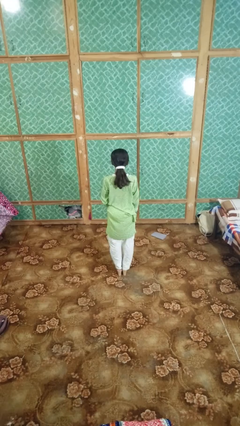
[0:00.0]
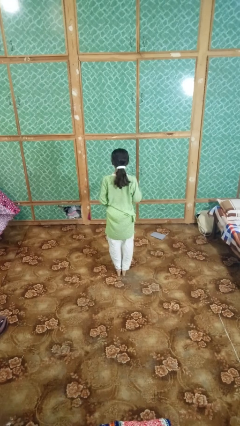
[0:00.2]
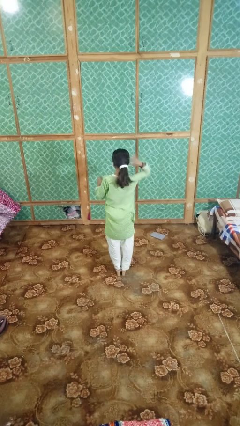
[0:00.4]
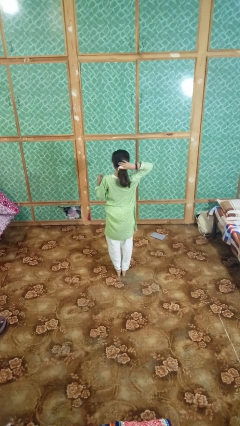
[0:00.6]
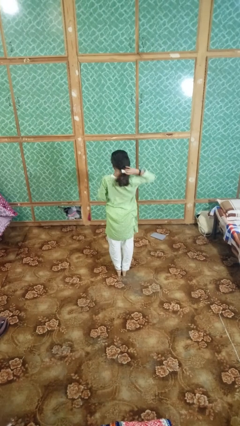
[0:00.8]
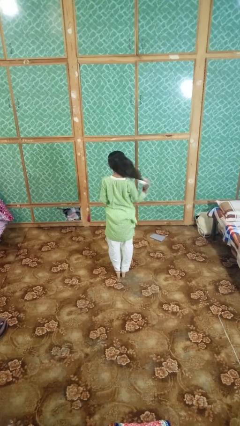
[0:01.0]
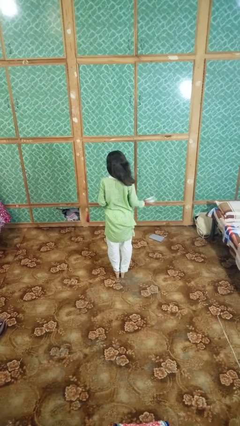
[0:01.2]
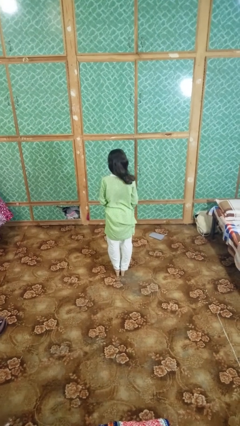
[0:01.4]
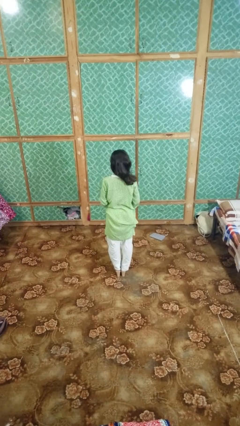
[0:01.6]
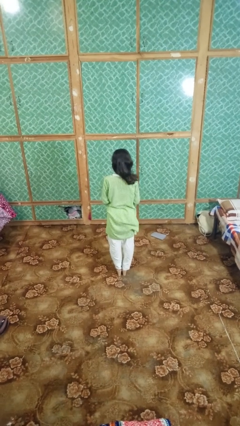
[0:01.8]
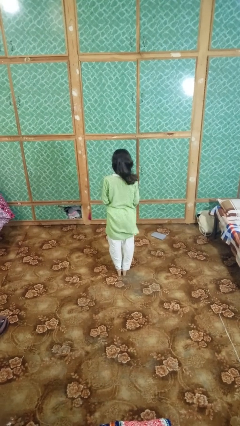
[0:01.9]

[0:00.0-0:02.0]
person takes off hairtie

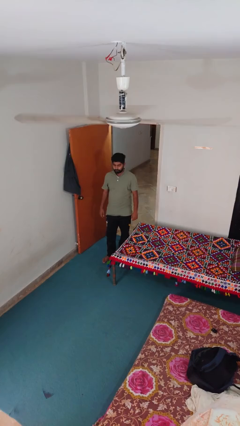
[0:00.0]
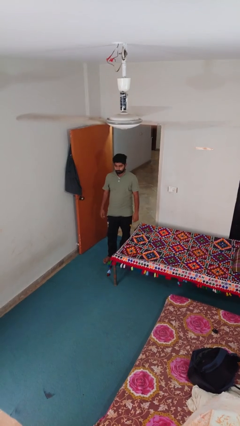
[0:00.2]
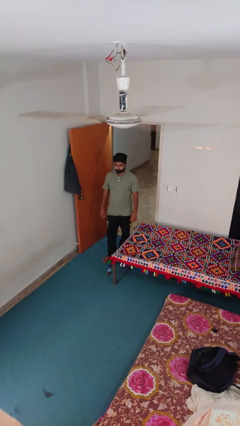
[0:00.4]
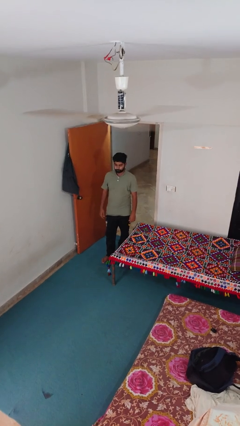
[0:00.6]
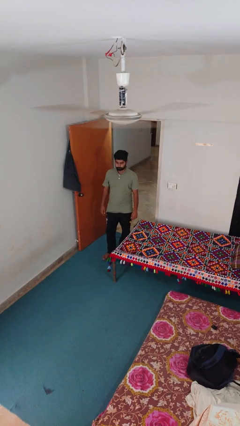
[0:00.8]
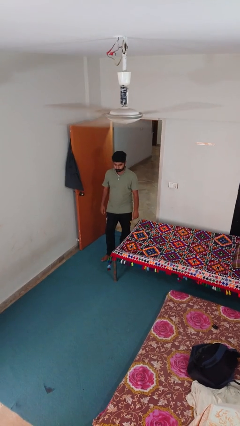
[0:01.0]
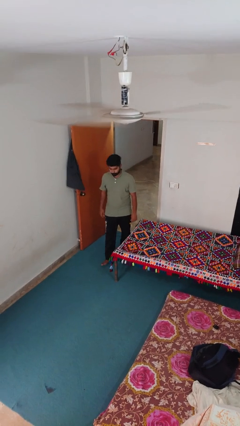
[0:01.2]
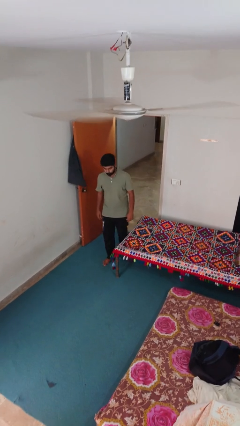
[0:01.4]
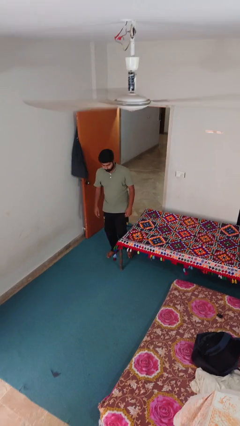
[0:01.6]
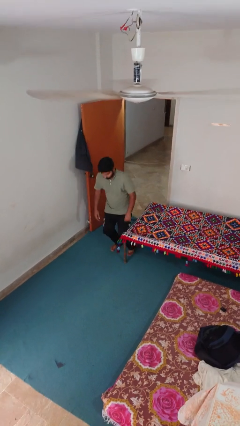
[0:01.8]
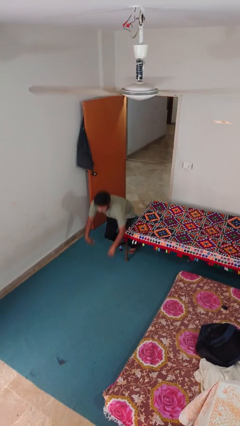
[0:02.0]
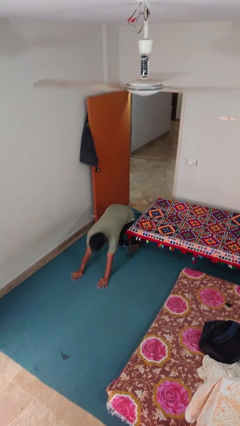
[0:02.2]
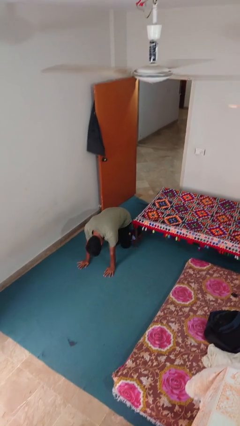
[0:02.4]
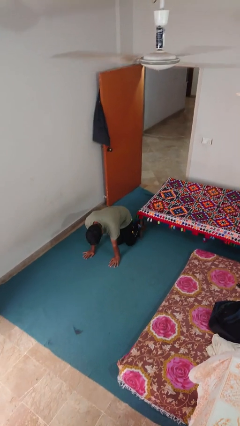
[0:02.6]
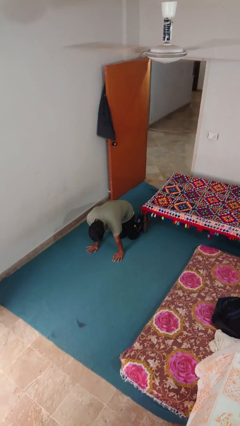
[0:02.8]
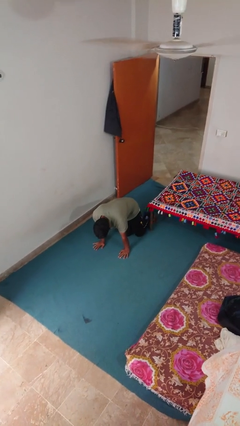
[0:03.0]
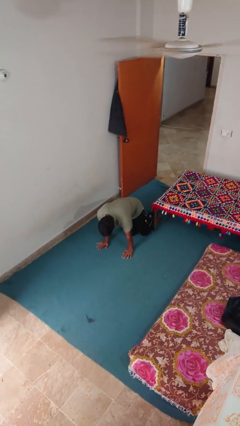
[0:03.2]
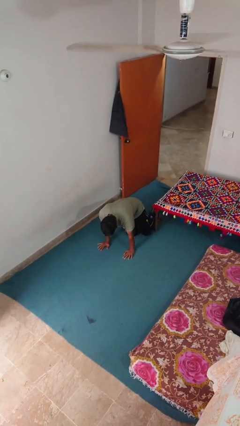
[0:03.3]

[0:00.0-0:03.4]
person trips on object on floor

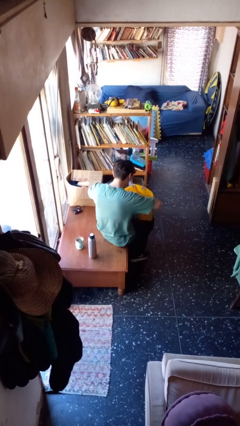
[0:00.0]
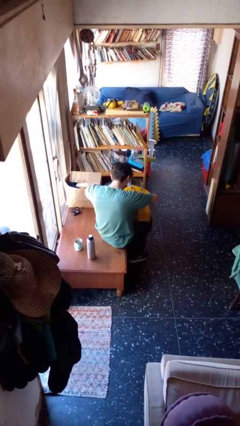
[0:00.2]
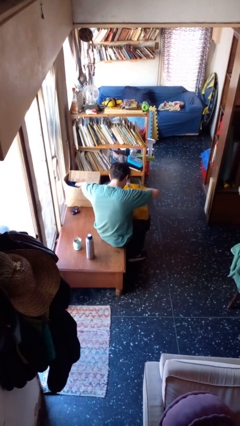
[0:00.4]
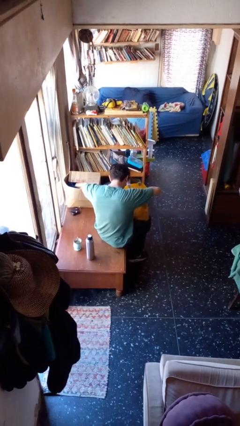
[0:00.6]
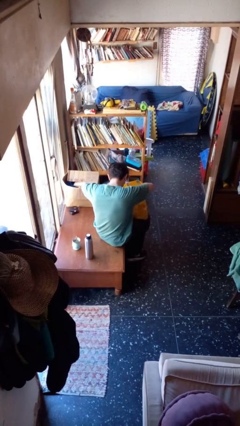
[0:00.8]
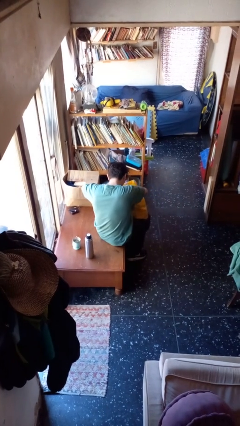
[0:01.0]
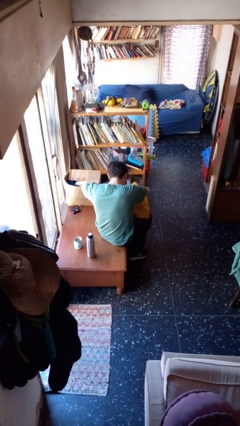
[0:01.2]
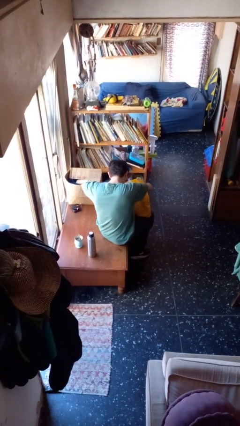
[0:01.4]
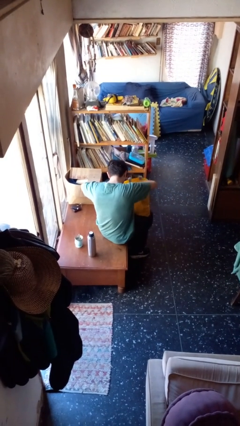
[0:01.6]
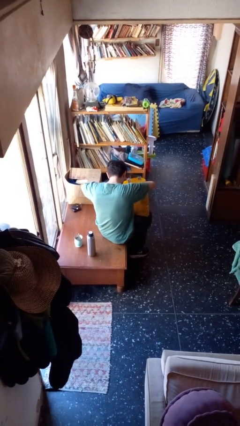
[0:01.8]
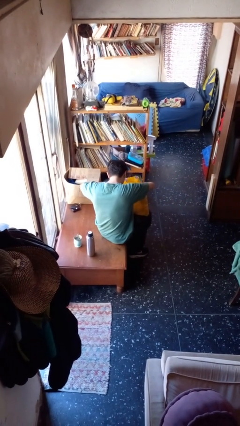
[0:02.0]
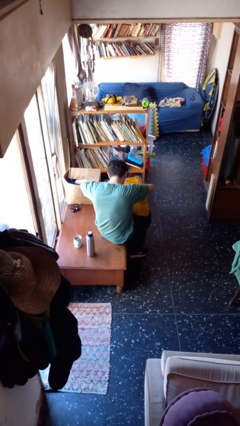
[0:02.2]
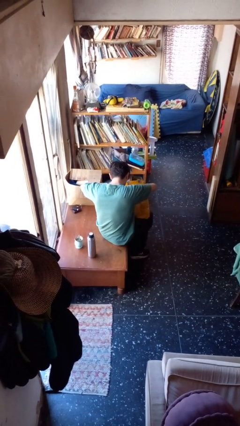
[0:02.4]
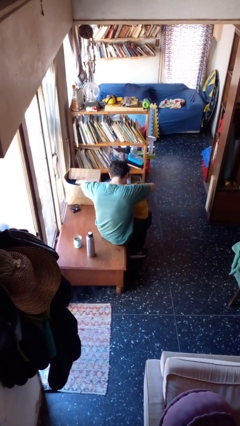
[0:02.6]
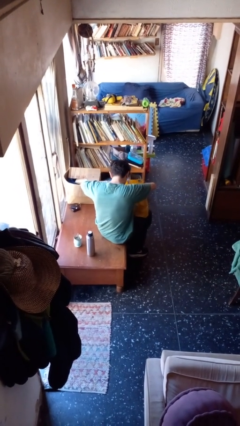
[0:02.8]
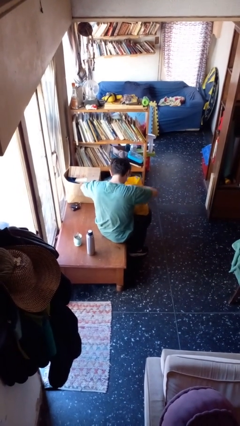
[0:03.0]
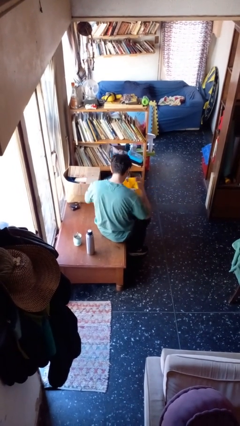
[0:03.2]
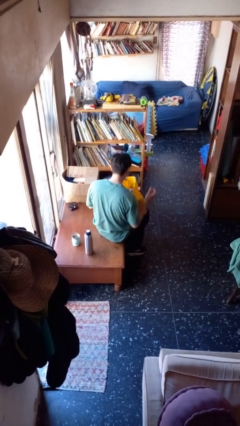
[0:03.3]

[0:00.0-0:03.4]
person searches in bag

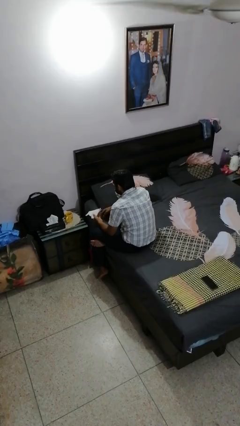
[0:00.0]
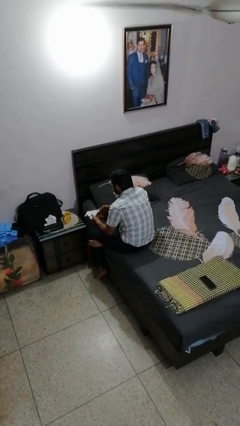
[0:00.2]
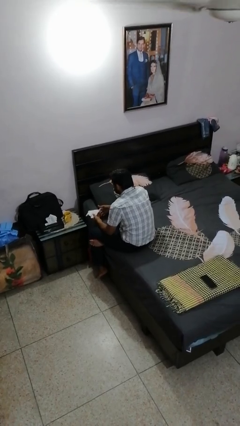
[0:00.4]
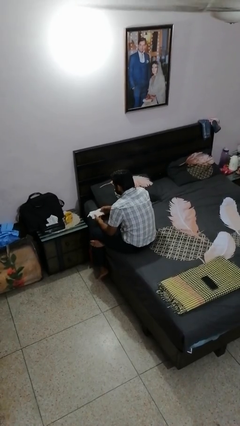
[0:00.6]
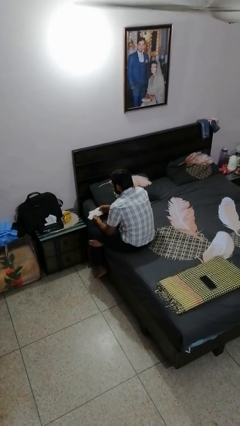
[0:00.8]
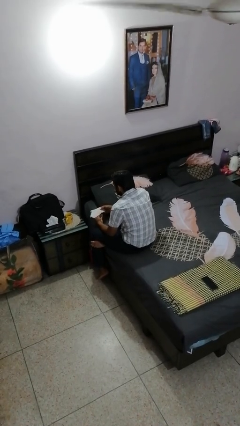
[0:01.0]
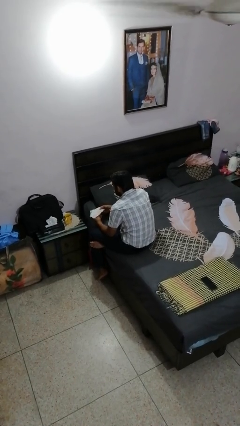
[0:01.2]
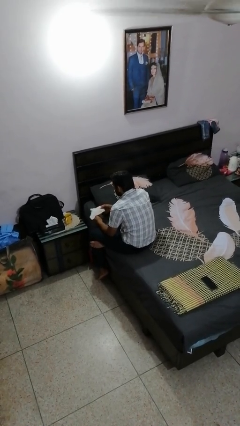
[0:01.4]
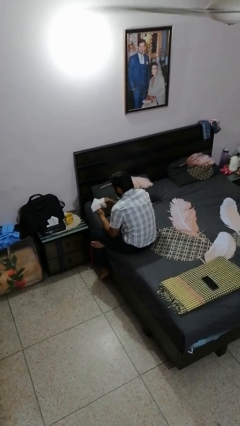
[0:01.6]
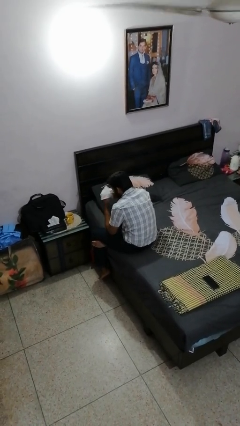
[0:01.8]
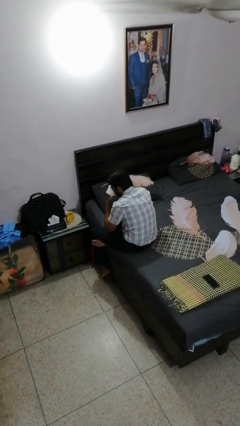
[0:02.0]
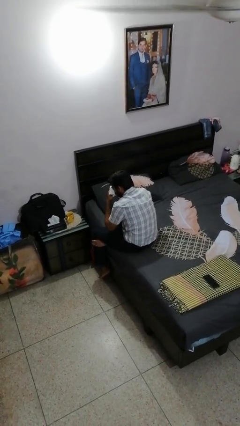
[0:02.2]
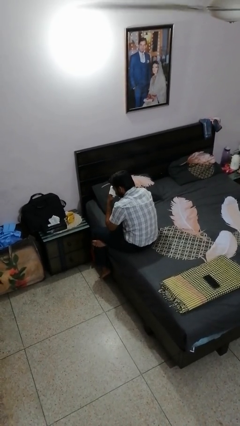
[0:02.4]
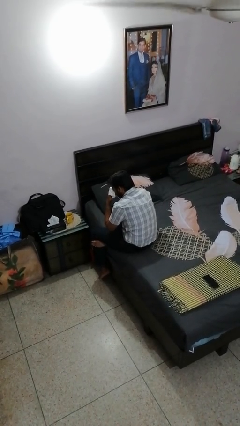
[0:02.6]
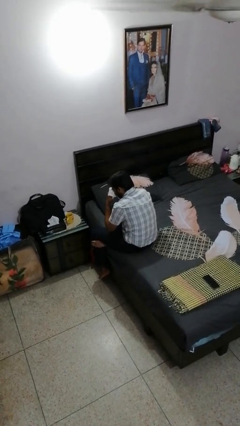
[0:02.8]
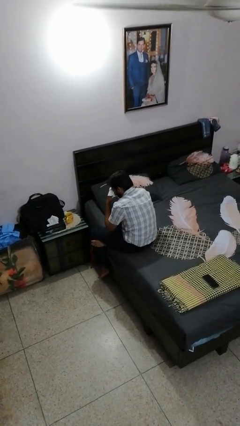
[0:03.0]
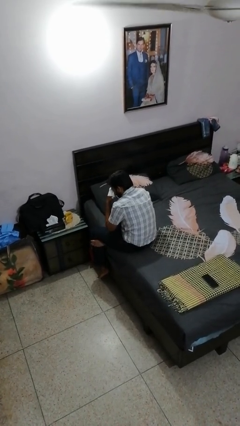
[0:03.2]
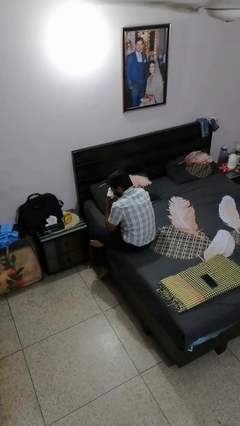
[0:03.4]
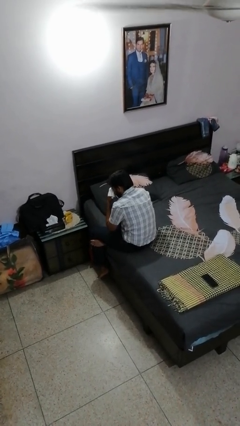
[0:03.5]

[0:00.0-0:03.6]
person blows nose

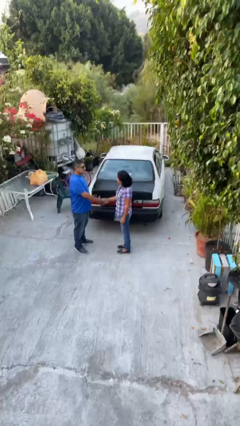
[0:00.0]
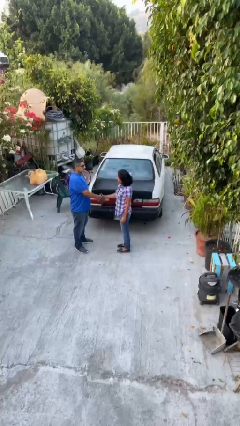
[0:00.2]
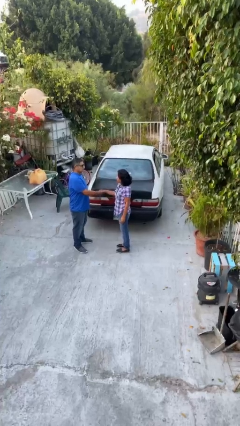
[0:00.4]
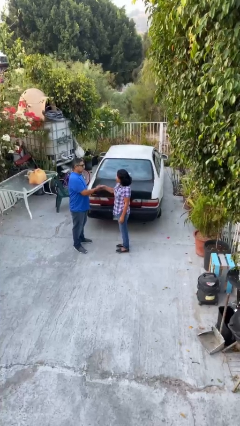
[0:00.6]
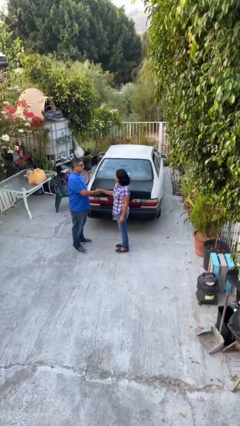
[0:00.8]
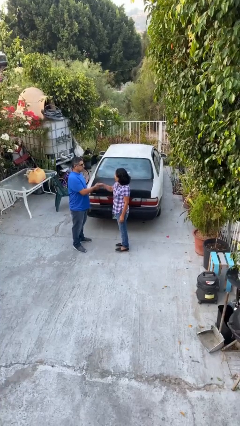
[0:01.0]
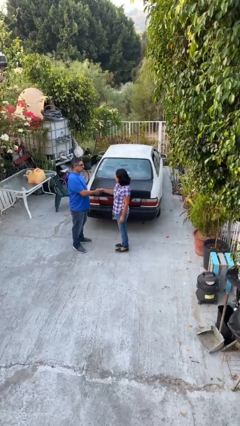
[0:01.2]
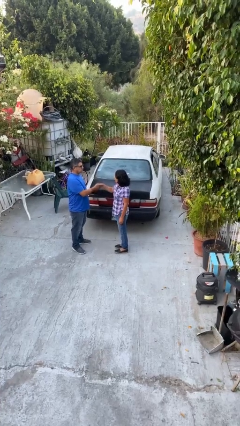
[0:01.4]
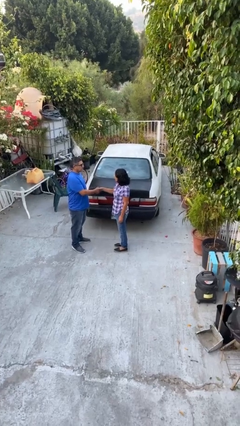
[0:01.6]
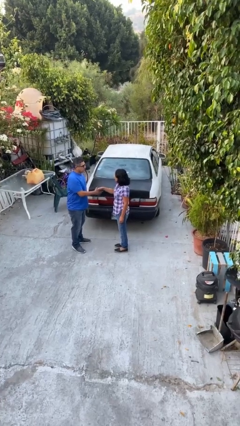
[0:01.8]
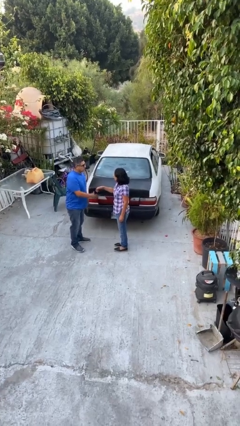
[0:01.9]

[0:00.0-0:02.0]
person shakes hand

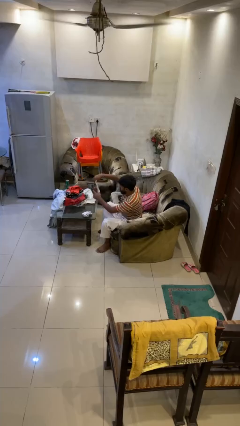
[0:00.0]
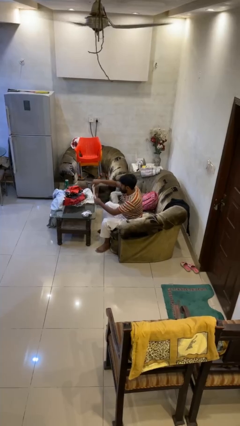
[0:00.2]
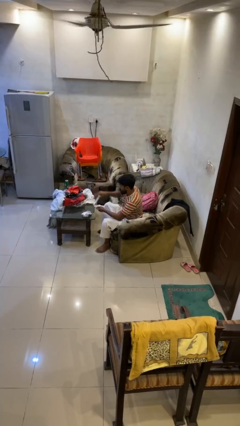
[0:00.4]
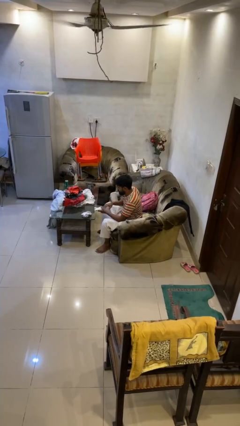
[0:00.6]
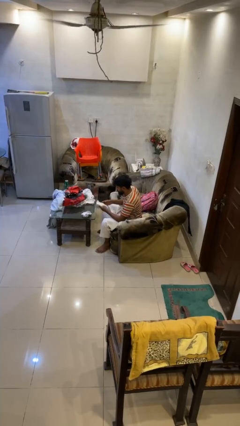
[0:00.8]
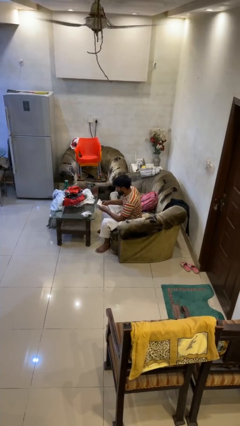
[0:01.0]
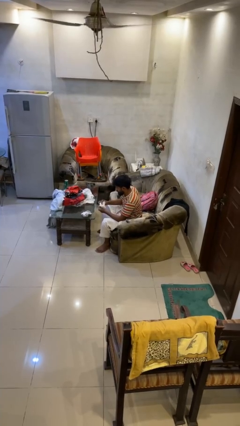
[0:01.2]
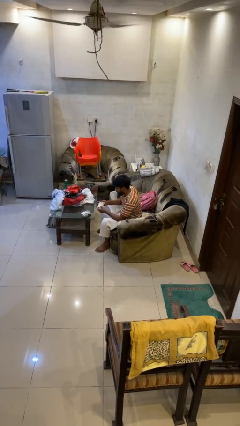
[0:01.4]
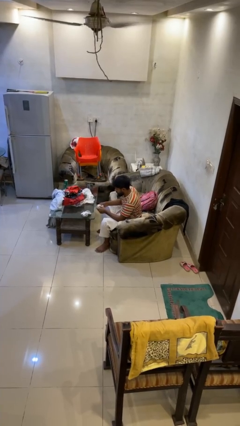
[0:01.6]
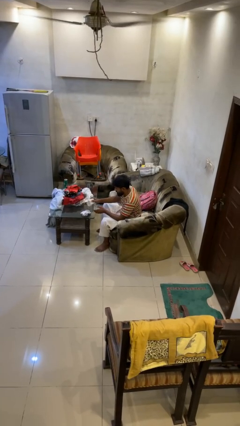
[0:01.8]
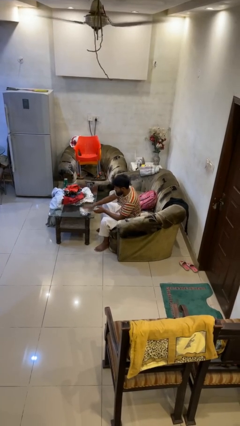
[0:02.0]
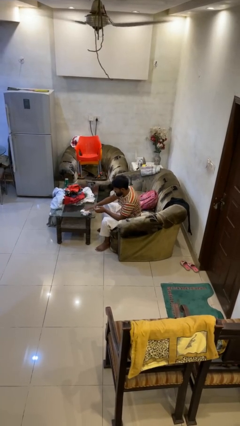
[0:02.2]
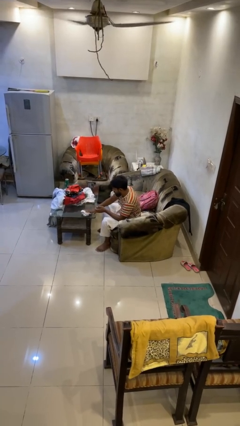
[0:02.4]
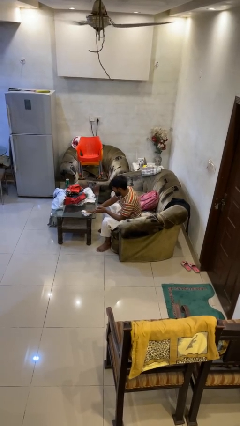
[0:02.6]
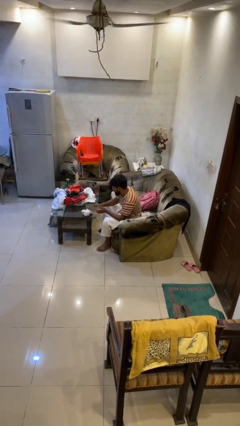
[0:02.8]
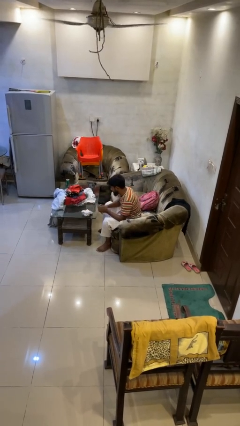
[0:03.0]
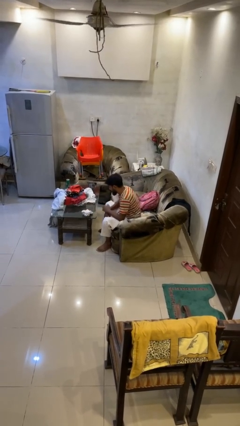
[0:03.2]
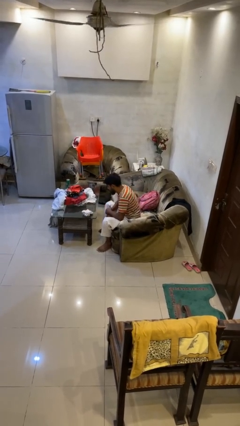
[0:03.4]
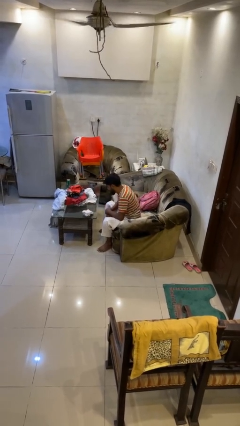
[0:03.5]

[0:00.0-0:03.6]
person folds socks
